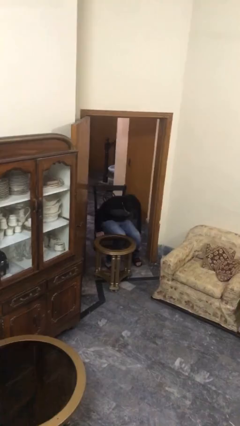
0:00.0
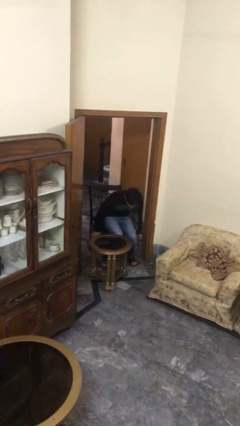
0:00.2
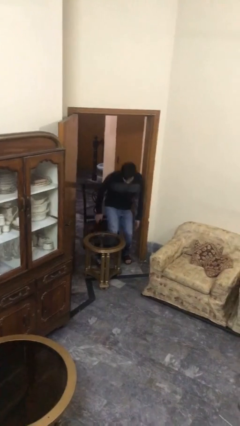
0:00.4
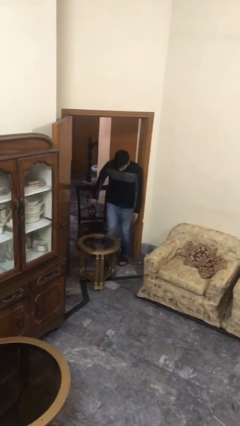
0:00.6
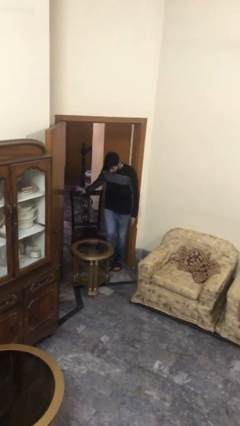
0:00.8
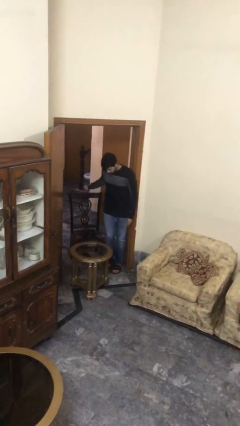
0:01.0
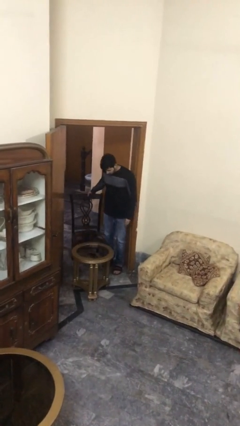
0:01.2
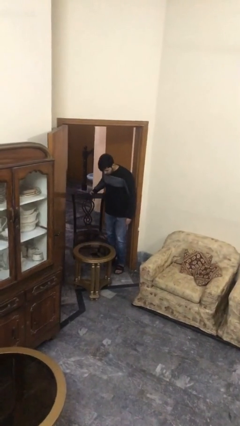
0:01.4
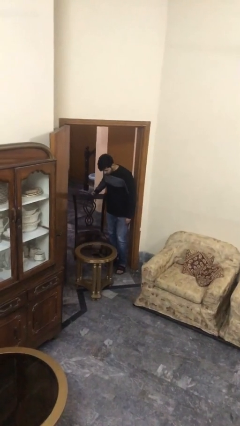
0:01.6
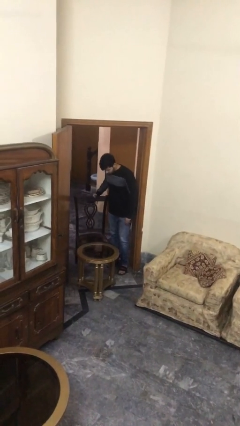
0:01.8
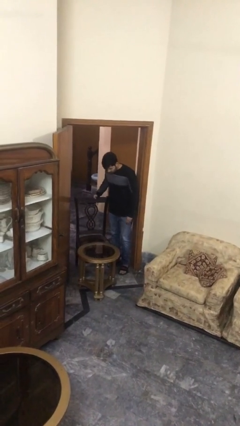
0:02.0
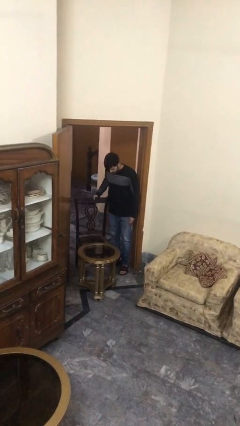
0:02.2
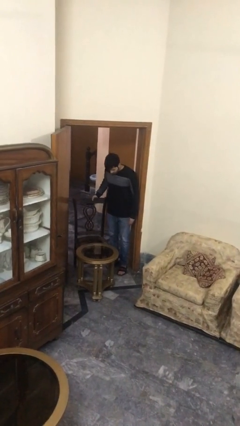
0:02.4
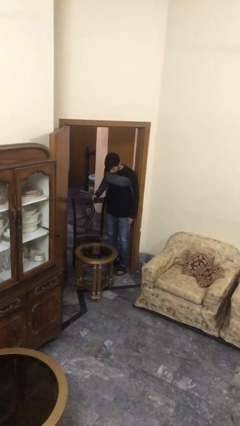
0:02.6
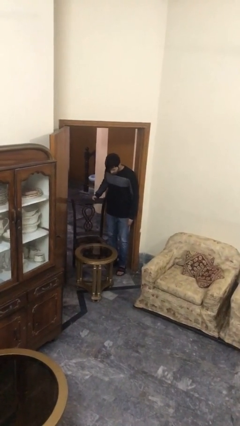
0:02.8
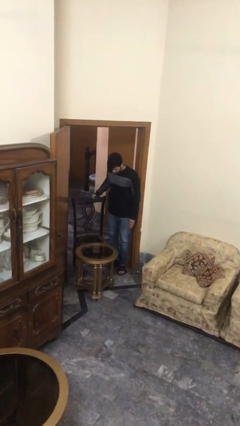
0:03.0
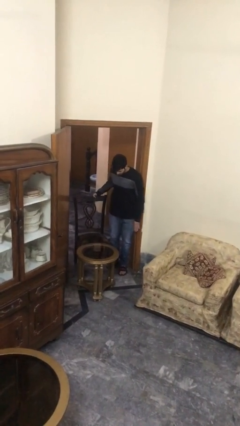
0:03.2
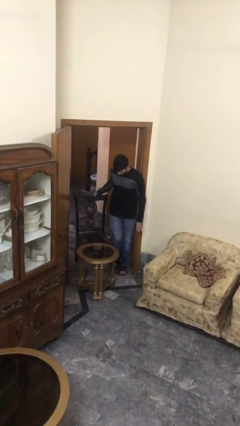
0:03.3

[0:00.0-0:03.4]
person stands up

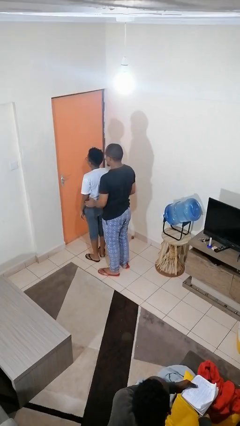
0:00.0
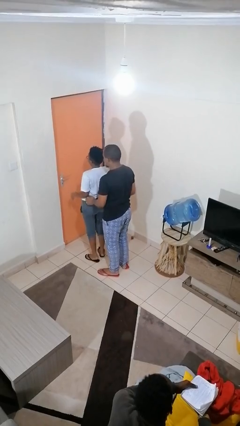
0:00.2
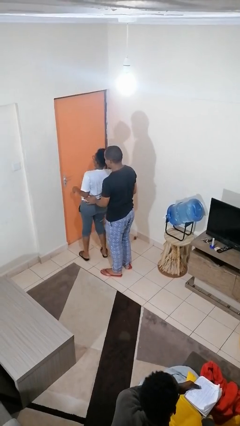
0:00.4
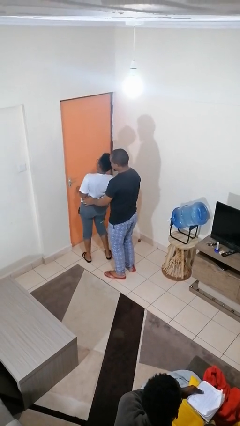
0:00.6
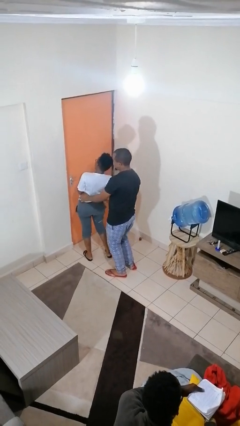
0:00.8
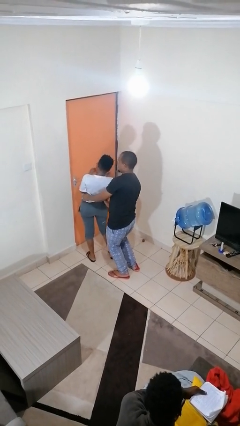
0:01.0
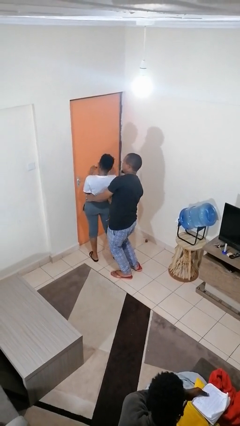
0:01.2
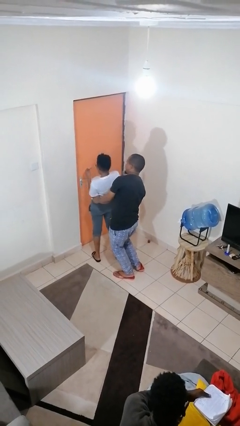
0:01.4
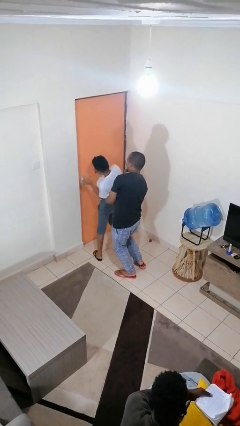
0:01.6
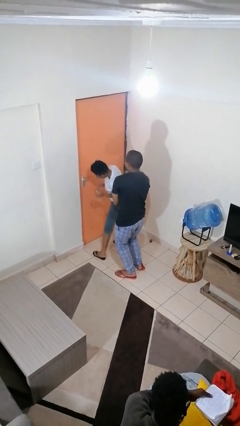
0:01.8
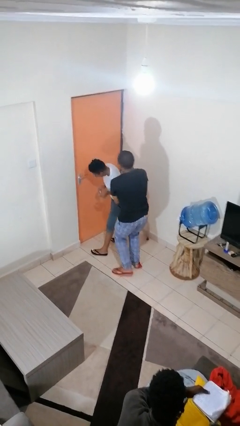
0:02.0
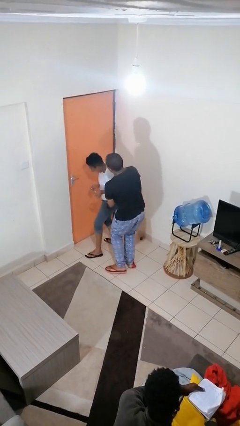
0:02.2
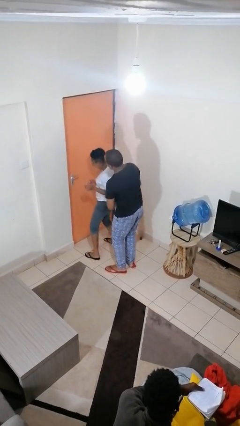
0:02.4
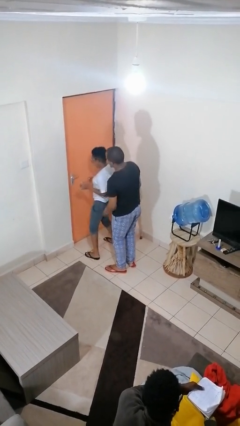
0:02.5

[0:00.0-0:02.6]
person tickles person

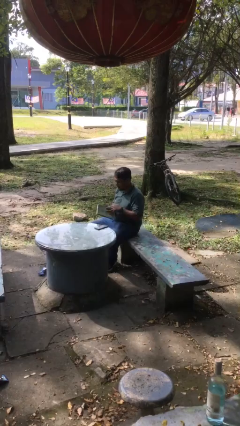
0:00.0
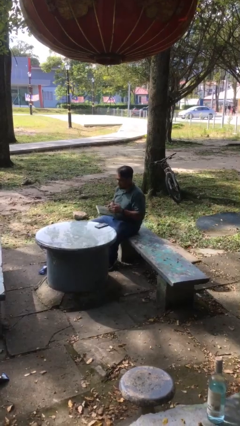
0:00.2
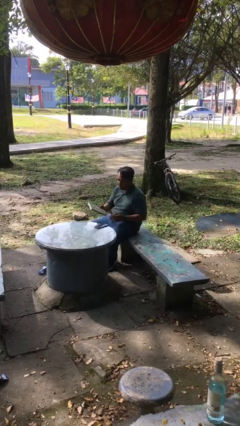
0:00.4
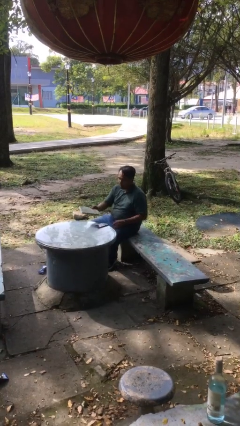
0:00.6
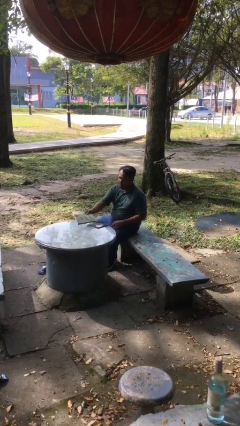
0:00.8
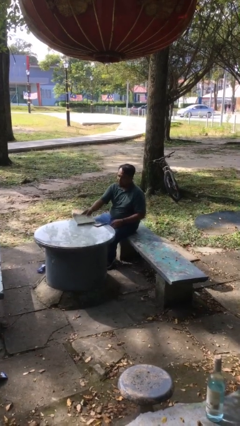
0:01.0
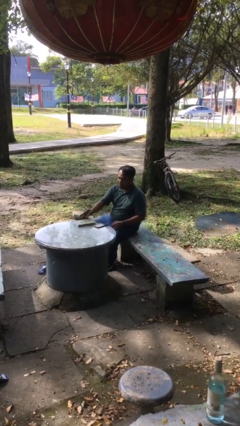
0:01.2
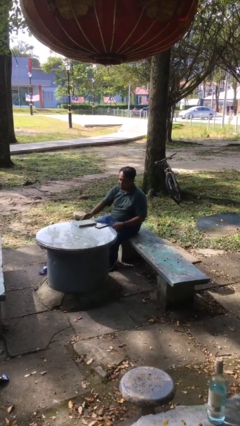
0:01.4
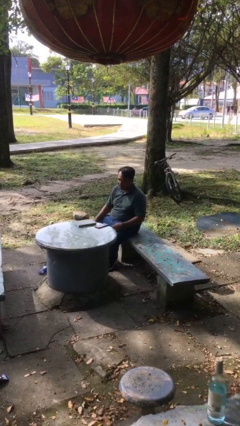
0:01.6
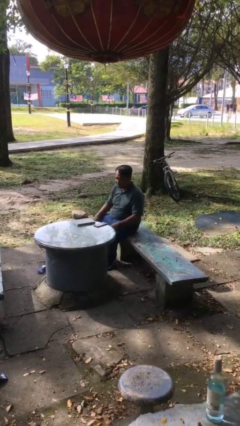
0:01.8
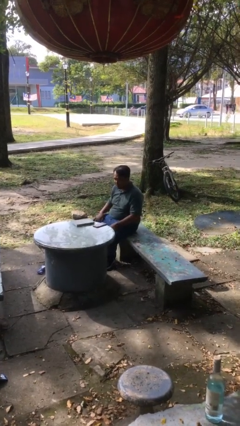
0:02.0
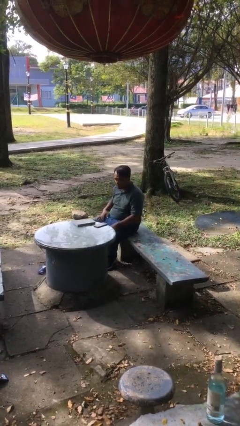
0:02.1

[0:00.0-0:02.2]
person puts down object on table

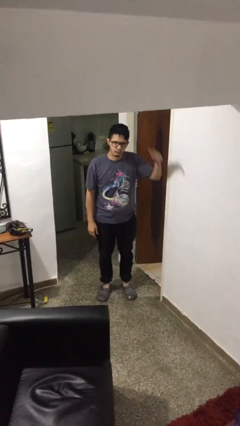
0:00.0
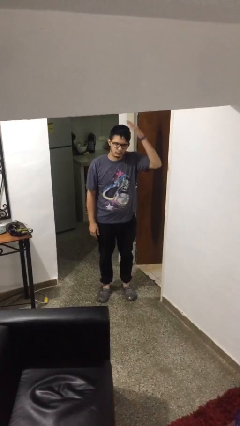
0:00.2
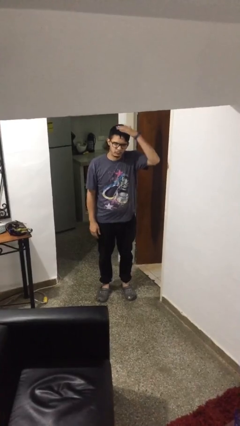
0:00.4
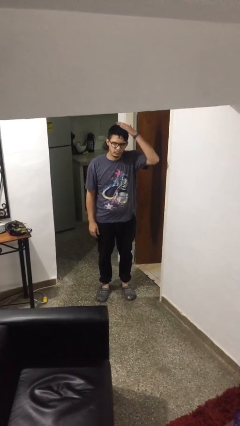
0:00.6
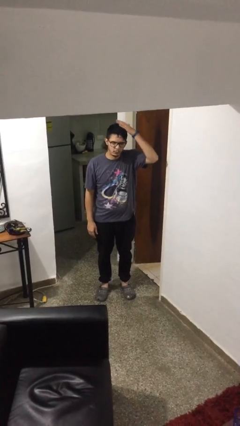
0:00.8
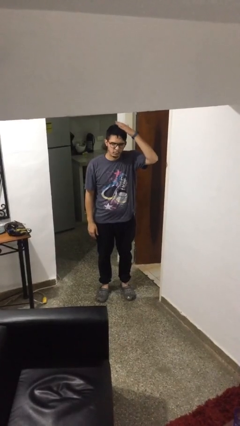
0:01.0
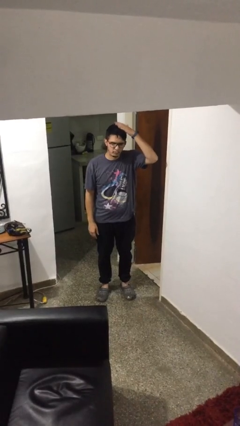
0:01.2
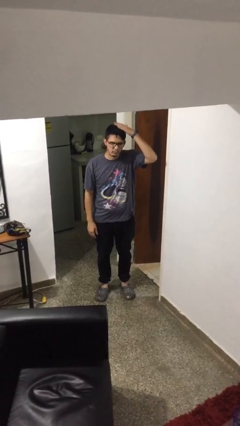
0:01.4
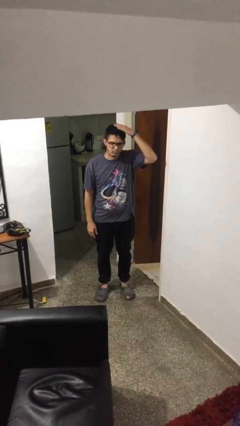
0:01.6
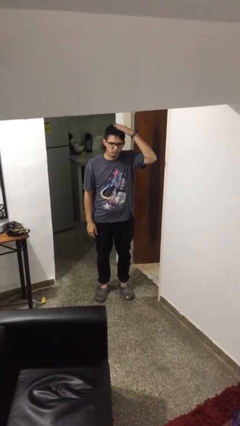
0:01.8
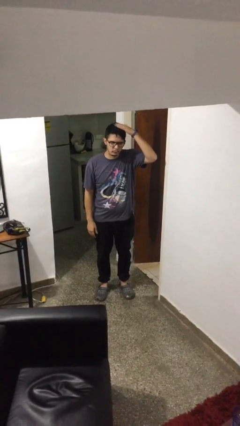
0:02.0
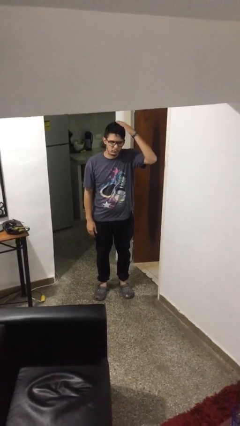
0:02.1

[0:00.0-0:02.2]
person pats head

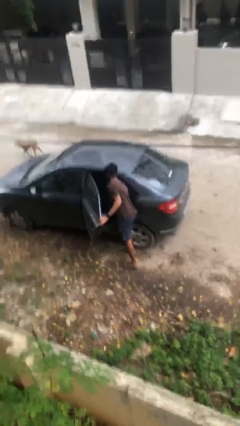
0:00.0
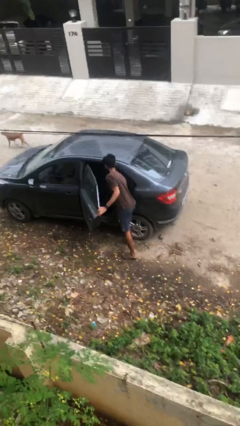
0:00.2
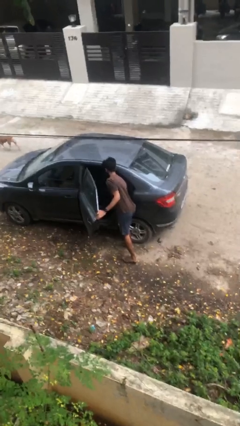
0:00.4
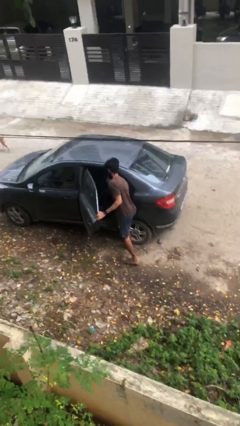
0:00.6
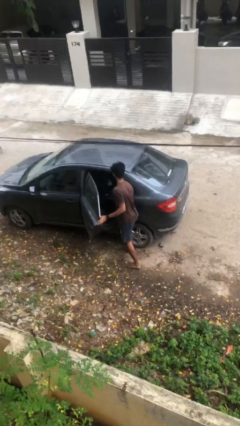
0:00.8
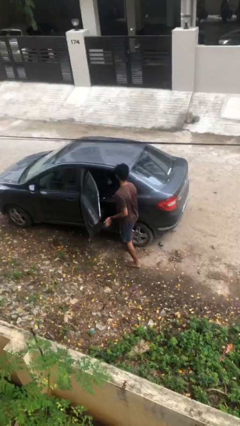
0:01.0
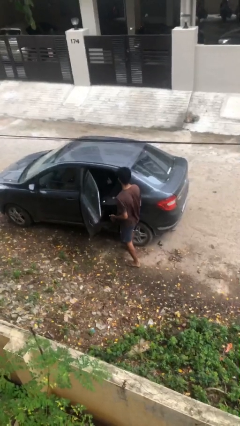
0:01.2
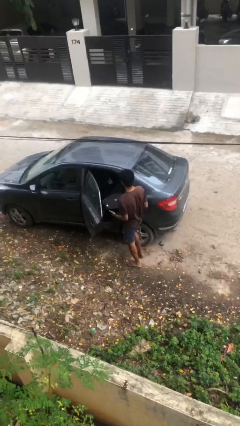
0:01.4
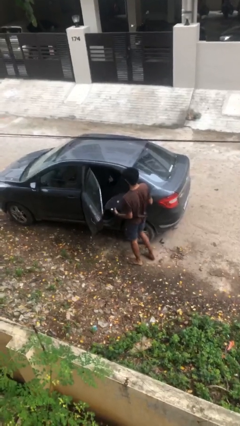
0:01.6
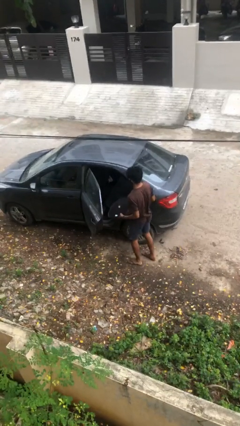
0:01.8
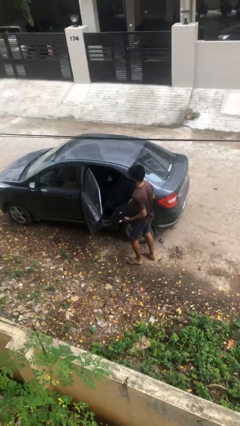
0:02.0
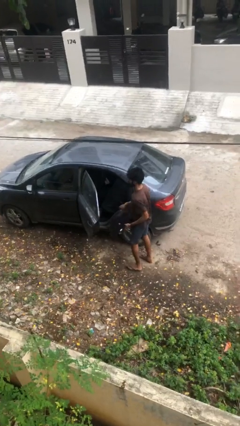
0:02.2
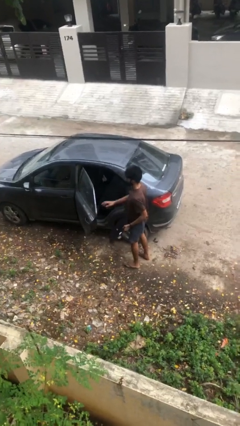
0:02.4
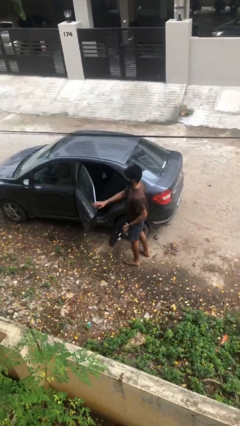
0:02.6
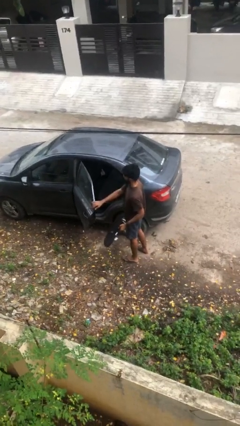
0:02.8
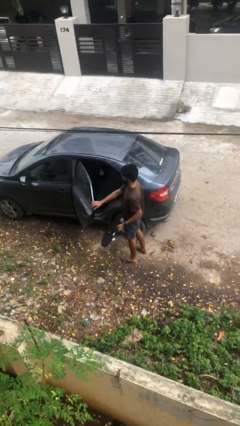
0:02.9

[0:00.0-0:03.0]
person unloads car

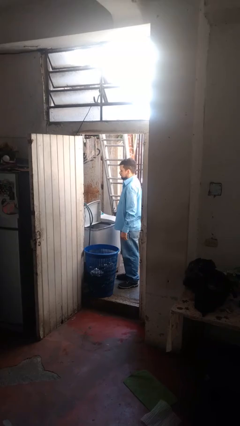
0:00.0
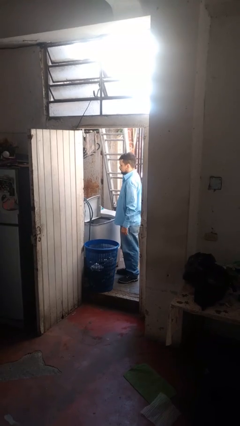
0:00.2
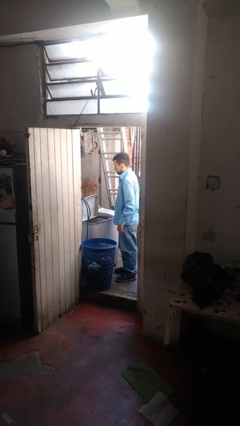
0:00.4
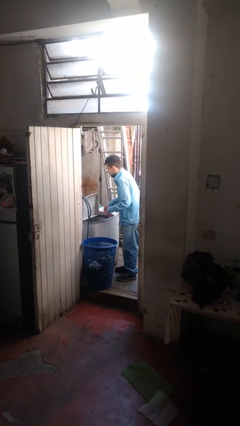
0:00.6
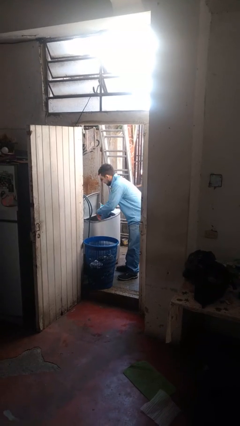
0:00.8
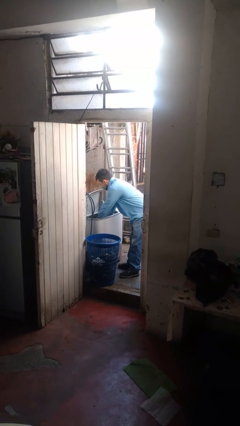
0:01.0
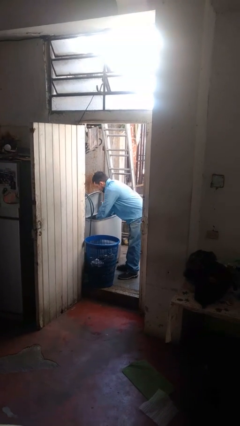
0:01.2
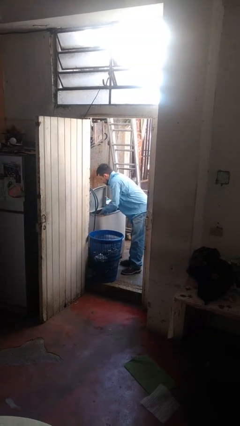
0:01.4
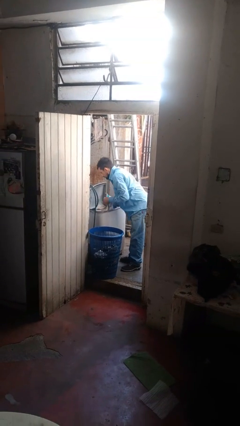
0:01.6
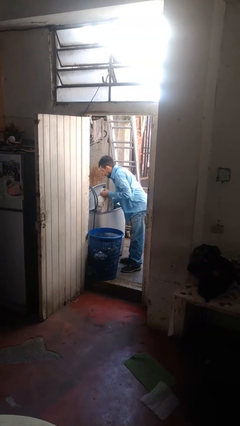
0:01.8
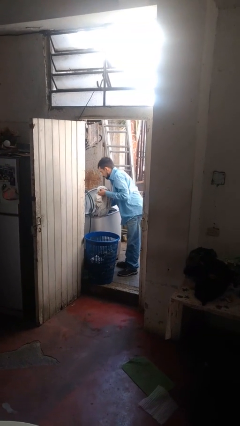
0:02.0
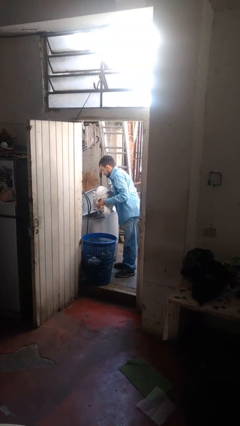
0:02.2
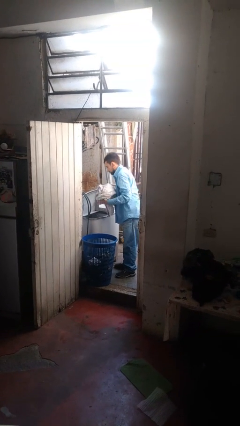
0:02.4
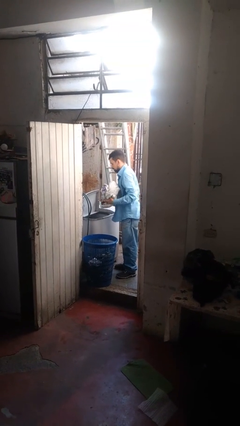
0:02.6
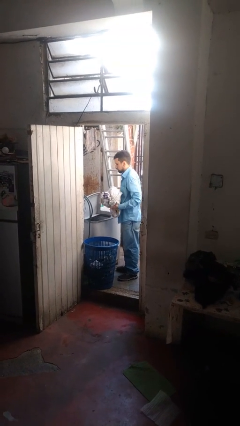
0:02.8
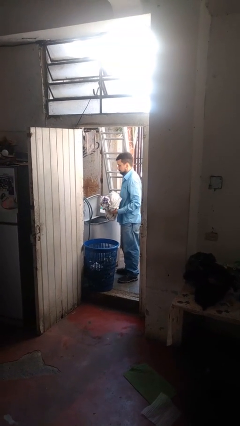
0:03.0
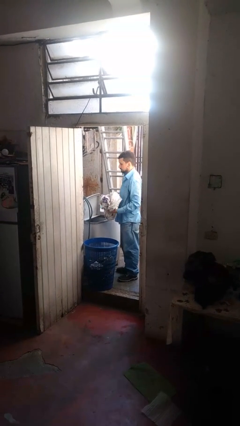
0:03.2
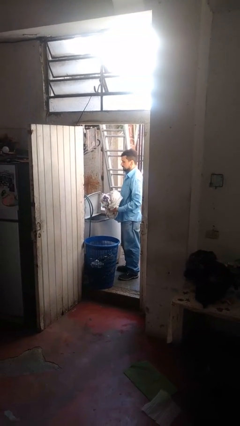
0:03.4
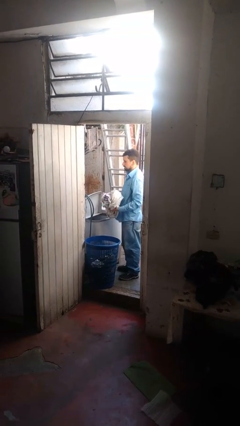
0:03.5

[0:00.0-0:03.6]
person unloads clotheswasher

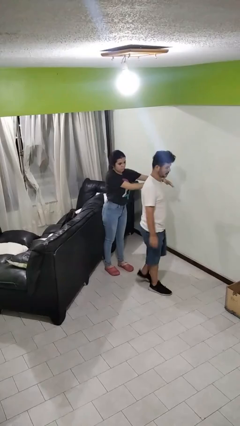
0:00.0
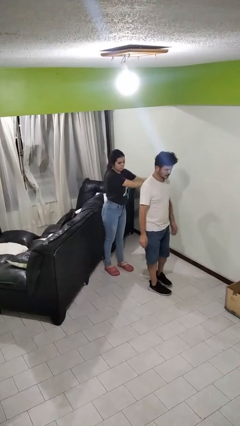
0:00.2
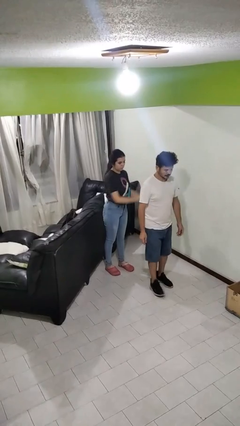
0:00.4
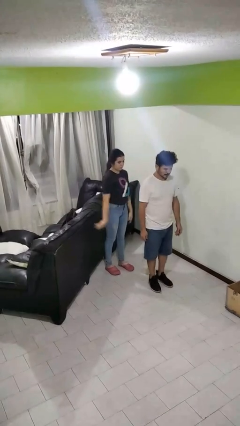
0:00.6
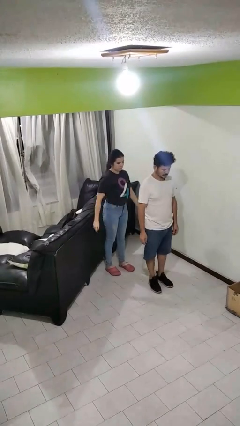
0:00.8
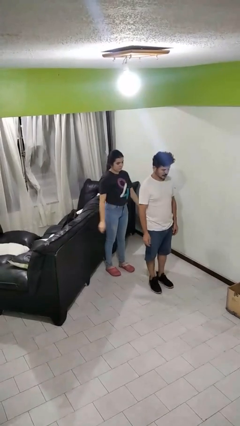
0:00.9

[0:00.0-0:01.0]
person spins person around
